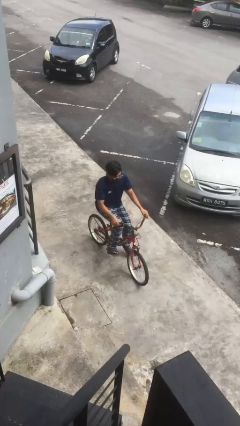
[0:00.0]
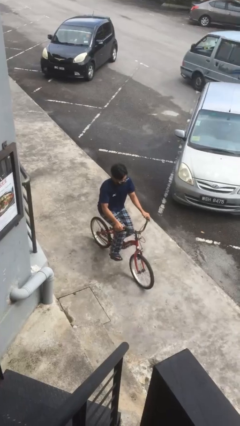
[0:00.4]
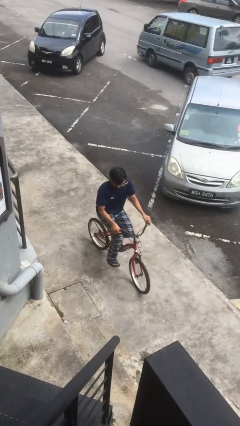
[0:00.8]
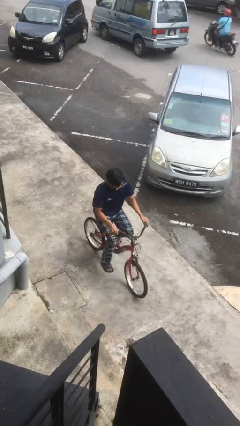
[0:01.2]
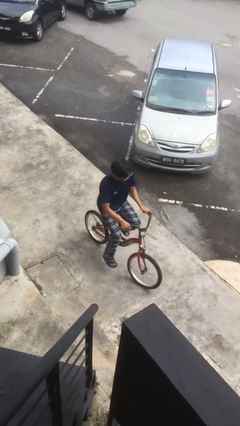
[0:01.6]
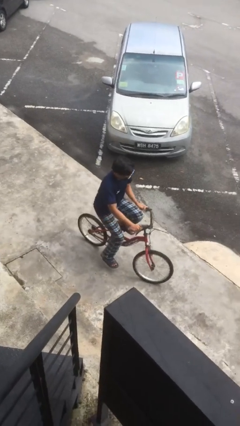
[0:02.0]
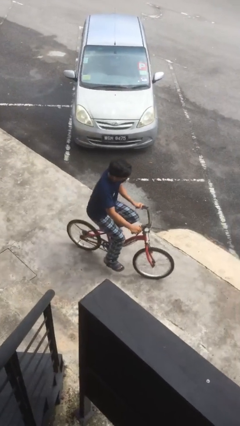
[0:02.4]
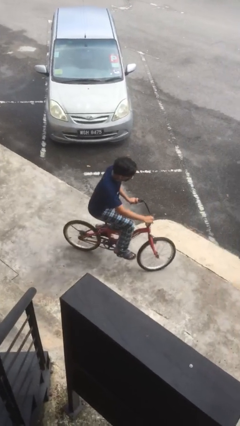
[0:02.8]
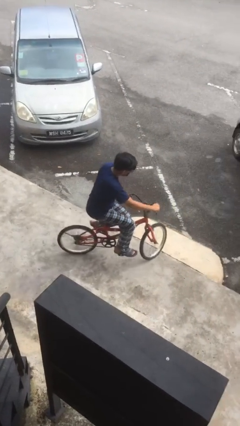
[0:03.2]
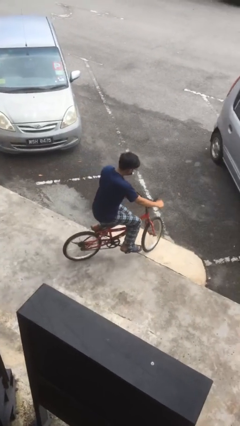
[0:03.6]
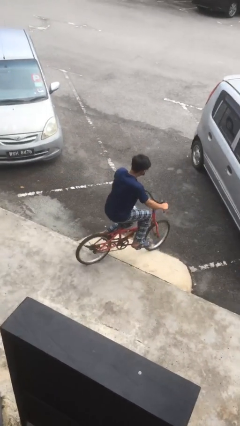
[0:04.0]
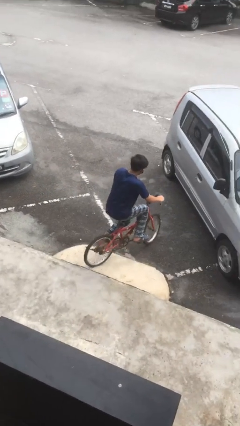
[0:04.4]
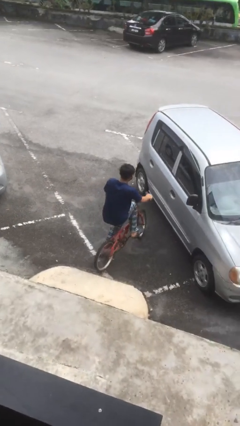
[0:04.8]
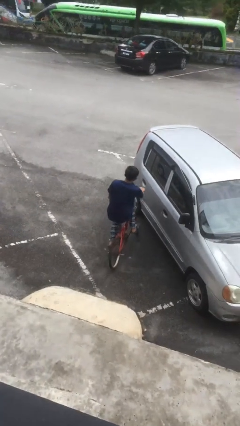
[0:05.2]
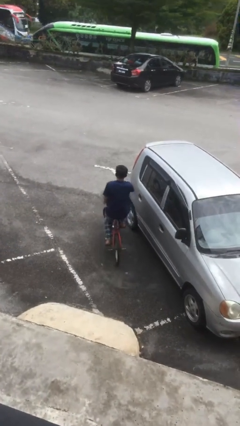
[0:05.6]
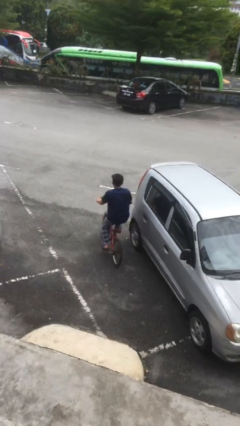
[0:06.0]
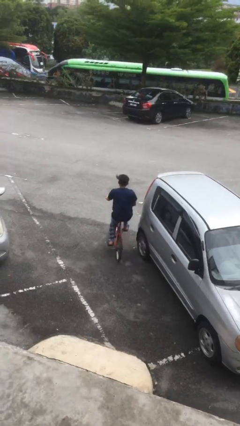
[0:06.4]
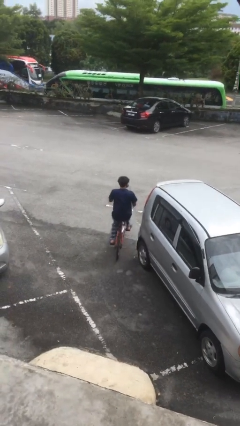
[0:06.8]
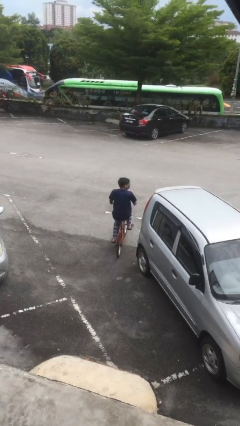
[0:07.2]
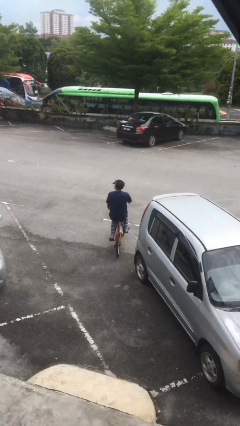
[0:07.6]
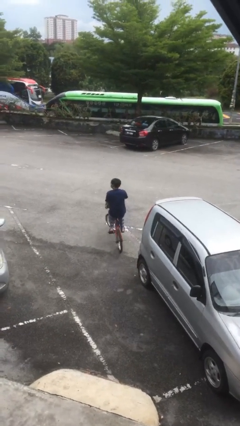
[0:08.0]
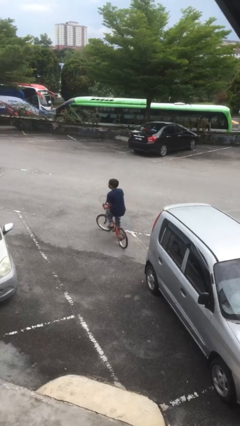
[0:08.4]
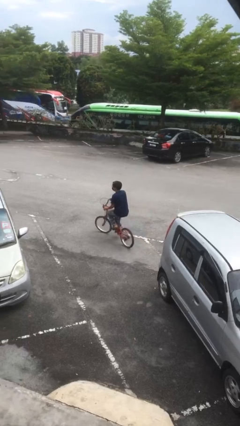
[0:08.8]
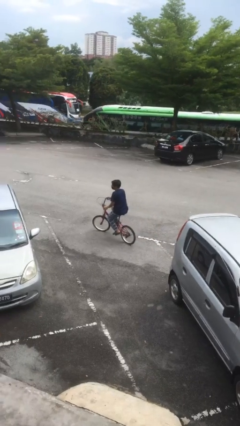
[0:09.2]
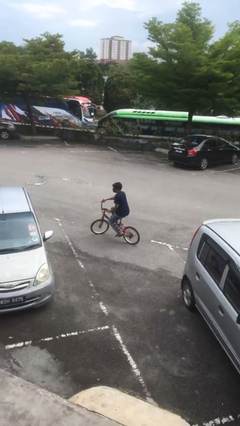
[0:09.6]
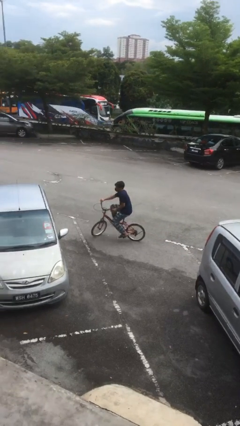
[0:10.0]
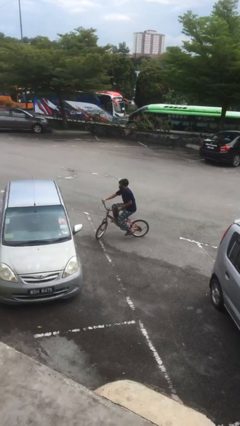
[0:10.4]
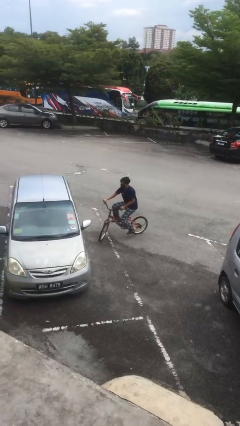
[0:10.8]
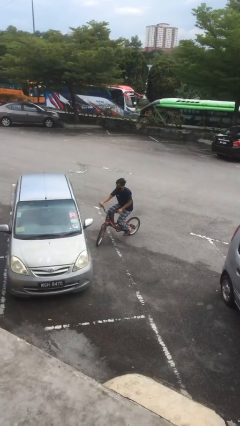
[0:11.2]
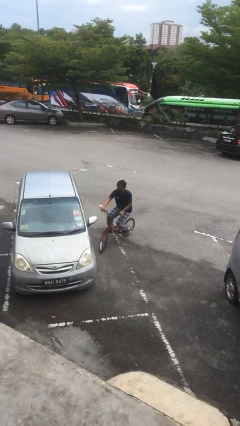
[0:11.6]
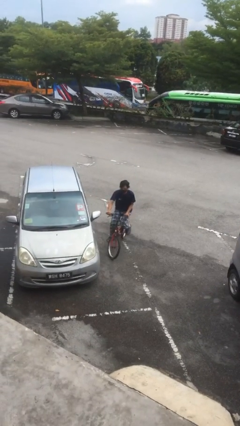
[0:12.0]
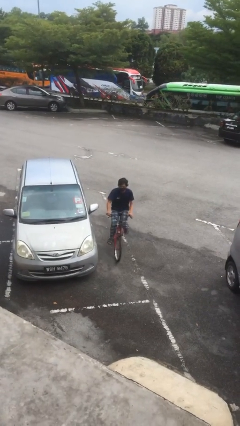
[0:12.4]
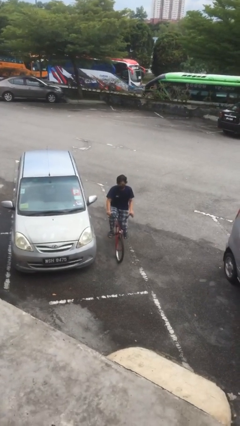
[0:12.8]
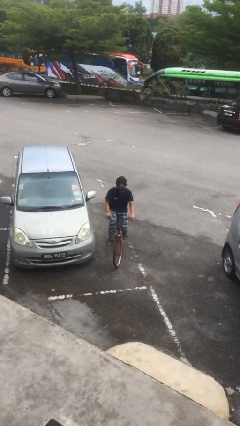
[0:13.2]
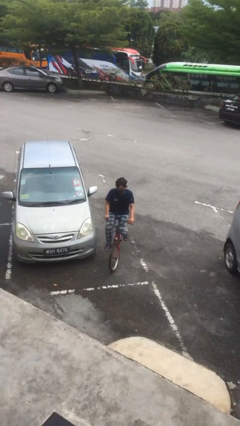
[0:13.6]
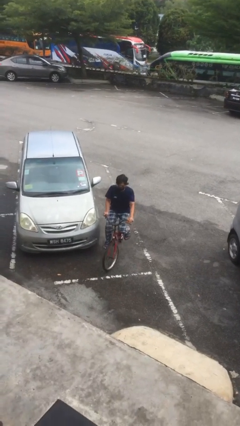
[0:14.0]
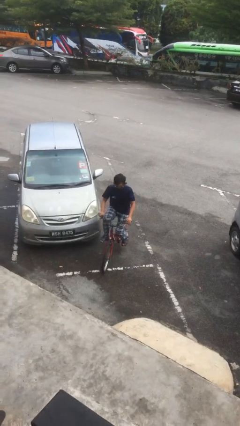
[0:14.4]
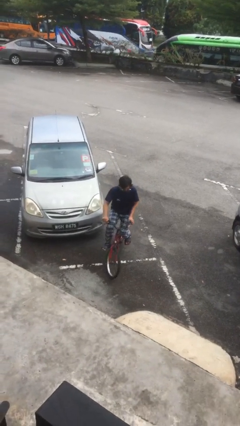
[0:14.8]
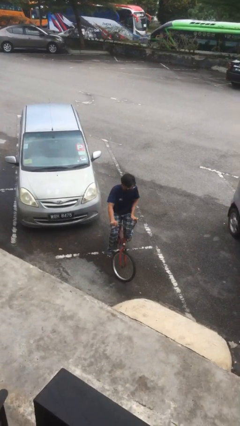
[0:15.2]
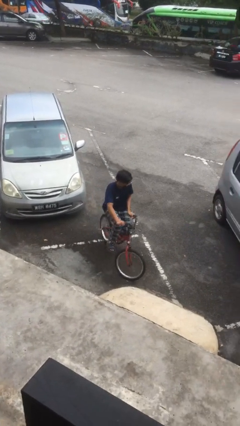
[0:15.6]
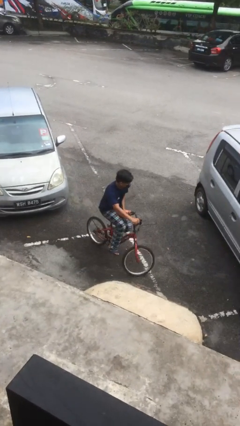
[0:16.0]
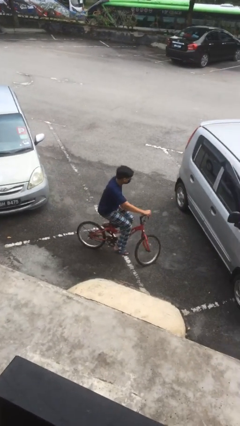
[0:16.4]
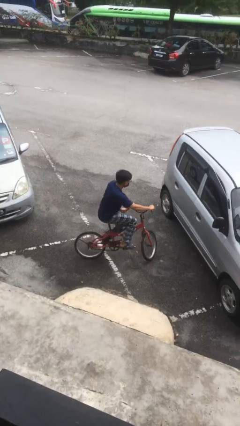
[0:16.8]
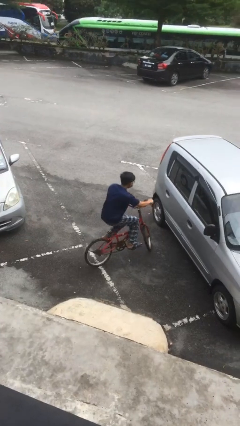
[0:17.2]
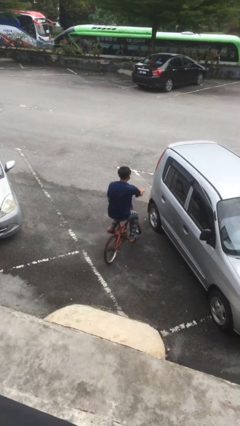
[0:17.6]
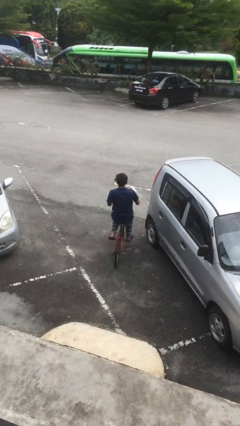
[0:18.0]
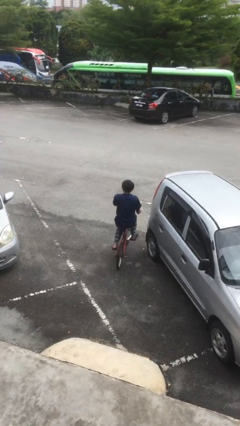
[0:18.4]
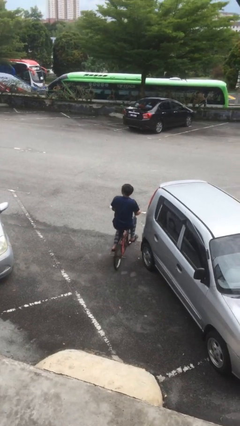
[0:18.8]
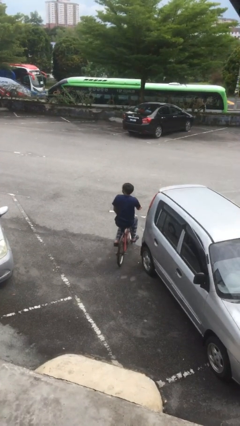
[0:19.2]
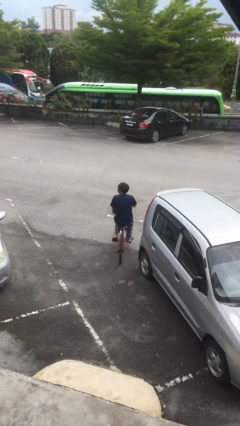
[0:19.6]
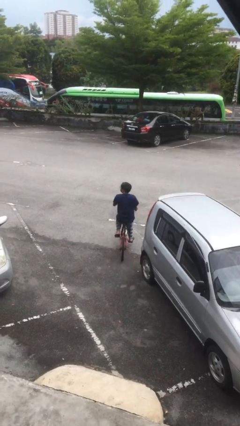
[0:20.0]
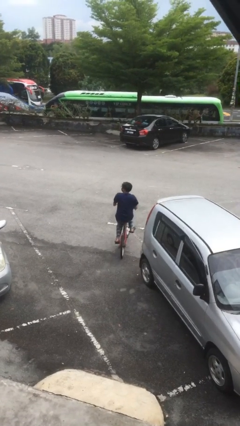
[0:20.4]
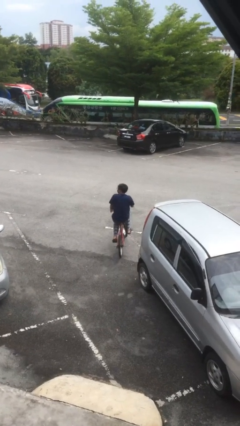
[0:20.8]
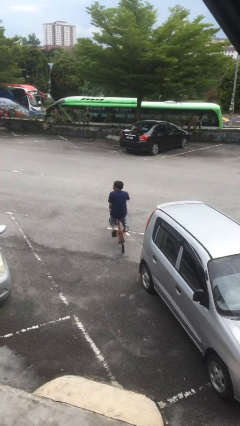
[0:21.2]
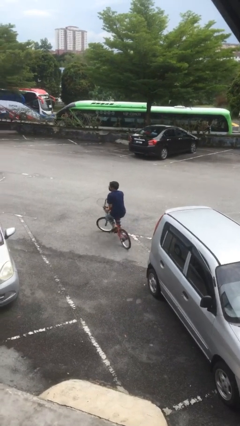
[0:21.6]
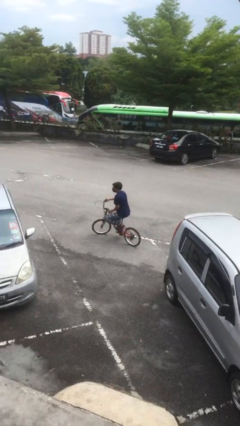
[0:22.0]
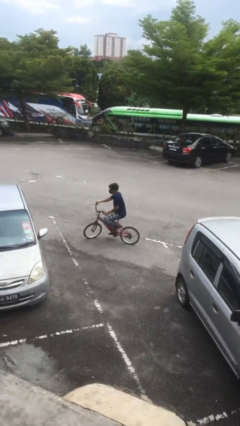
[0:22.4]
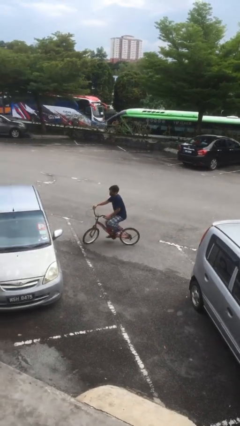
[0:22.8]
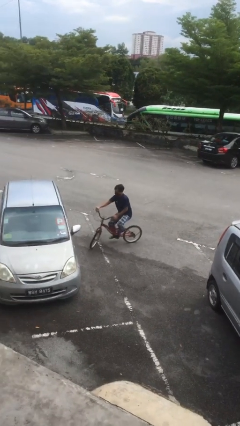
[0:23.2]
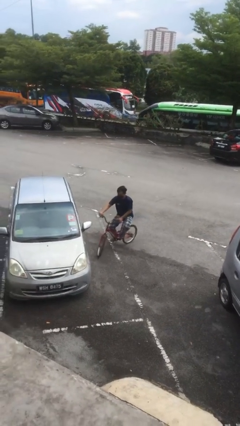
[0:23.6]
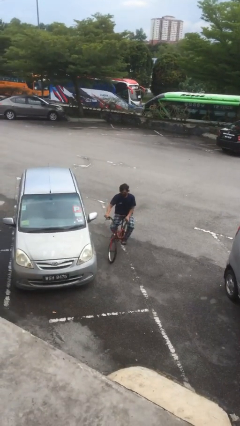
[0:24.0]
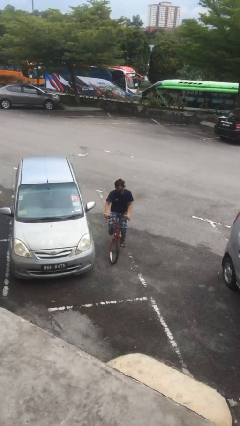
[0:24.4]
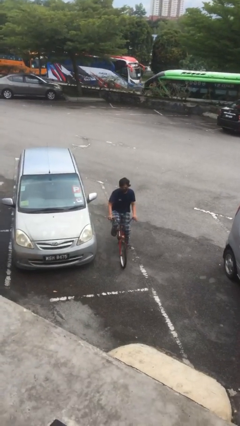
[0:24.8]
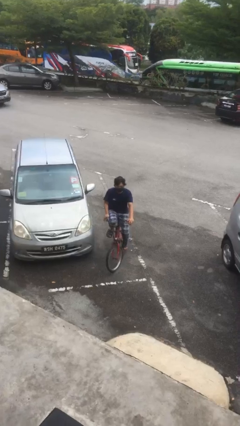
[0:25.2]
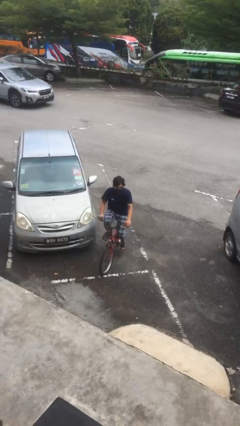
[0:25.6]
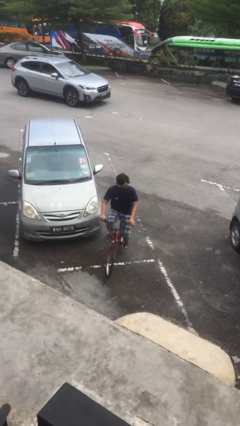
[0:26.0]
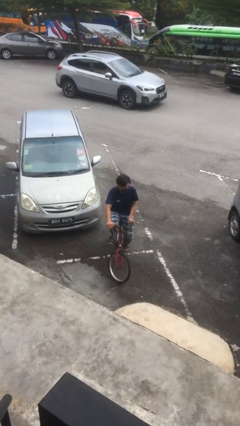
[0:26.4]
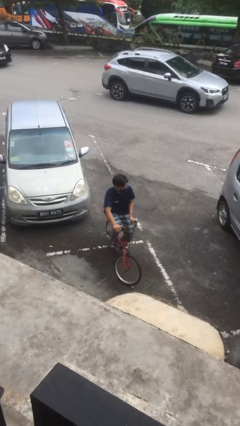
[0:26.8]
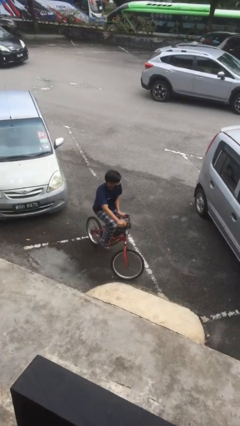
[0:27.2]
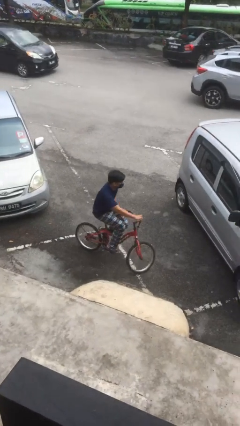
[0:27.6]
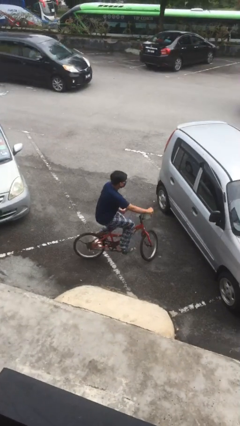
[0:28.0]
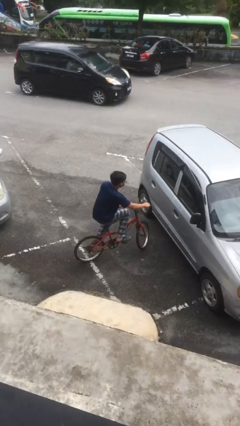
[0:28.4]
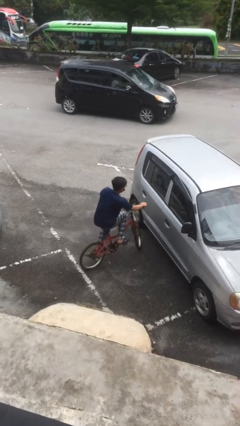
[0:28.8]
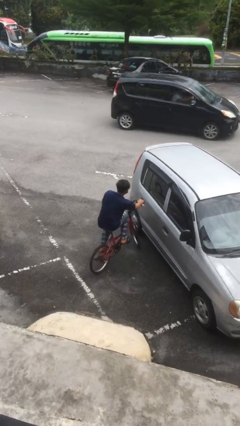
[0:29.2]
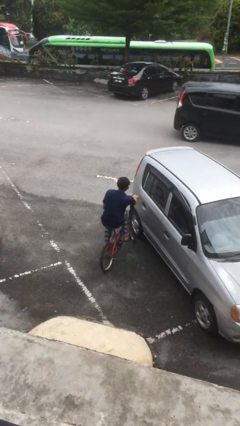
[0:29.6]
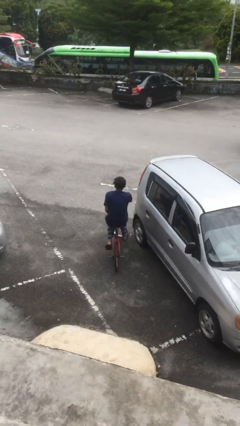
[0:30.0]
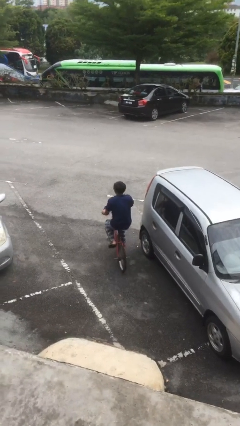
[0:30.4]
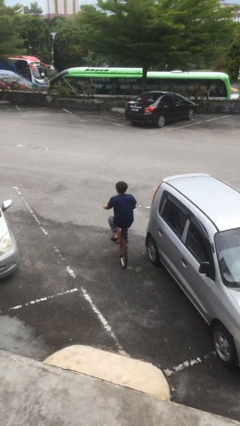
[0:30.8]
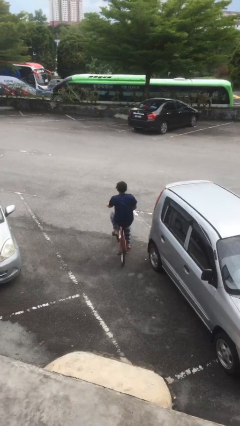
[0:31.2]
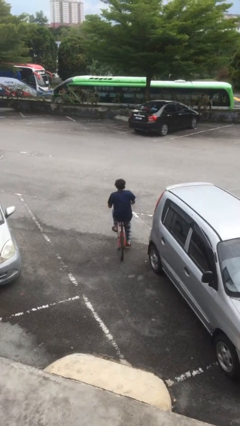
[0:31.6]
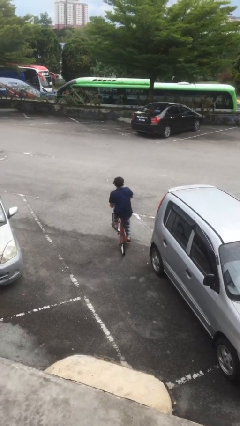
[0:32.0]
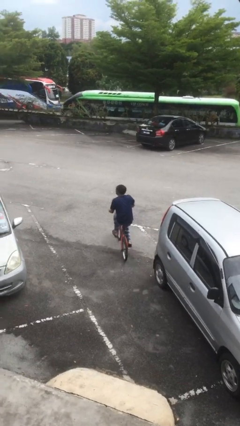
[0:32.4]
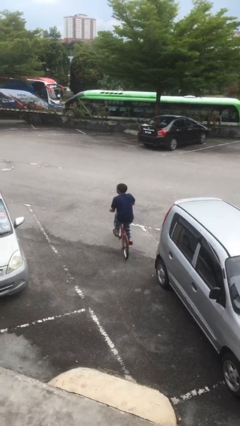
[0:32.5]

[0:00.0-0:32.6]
person rides bicycle

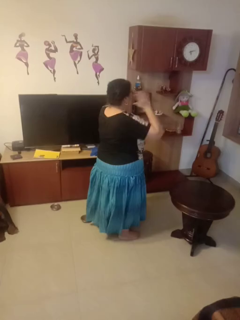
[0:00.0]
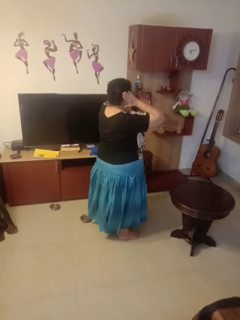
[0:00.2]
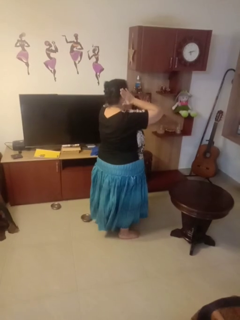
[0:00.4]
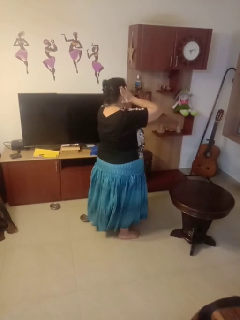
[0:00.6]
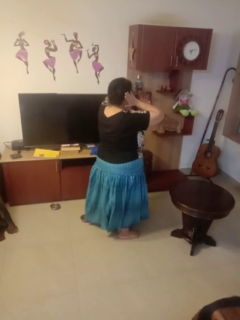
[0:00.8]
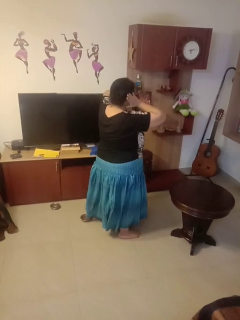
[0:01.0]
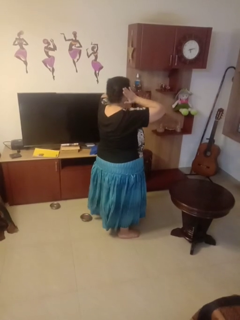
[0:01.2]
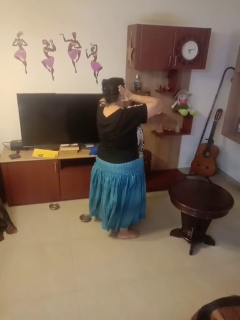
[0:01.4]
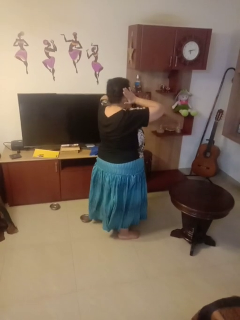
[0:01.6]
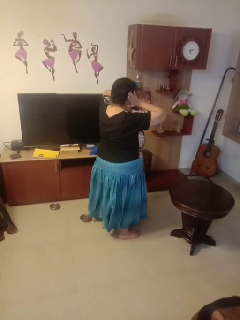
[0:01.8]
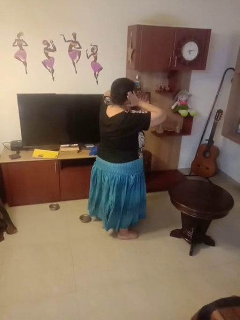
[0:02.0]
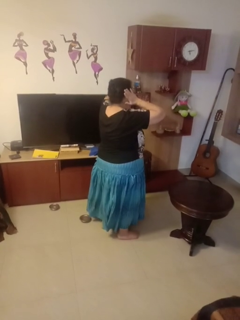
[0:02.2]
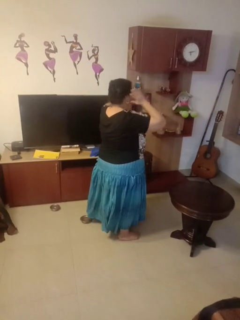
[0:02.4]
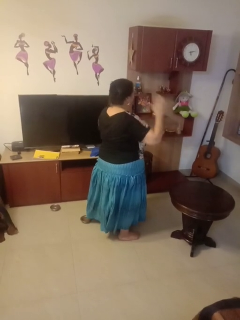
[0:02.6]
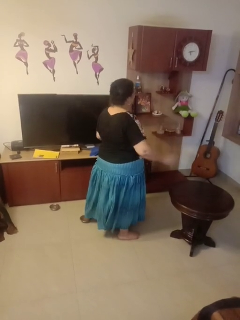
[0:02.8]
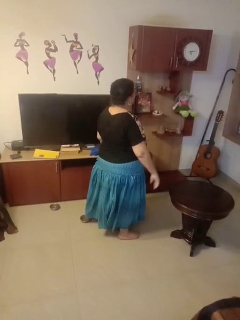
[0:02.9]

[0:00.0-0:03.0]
person puts fingers in ear
